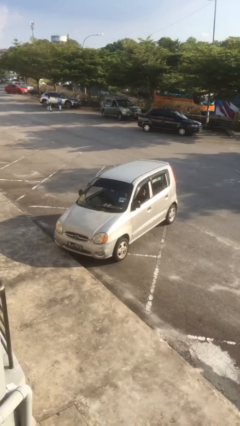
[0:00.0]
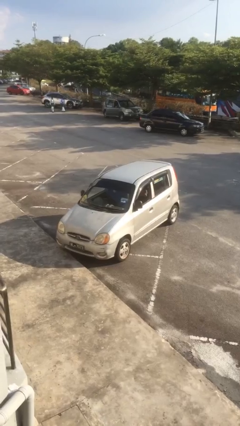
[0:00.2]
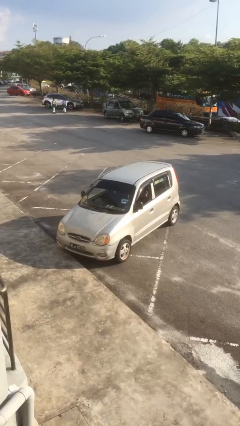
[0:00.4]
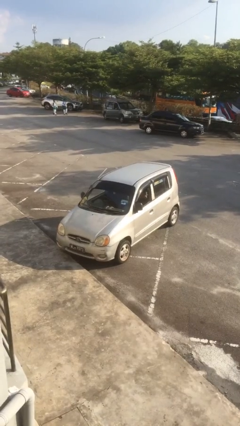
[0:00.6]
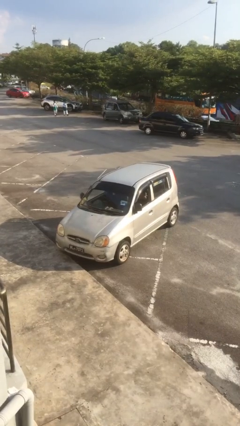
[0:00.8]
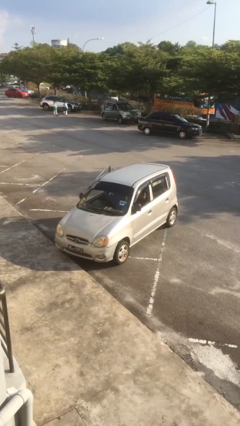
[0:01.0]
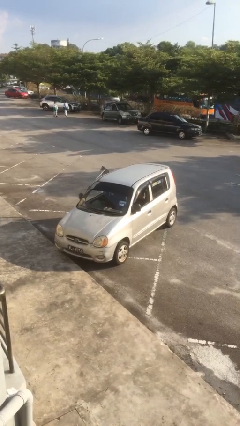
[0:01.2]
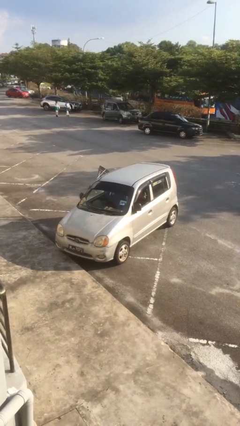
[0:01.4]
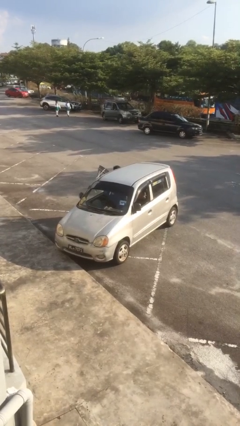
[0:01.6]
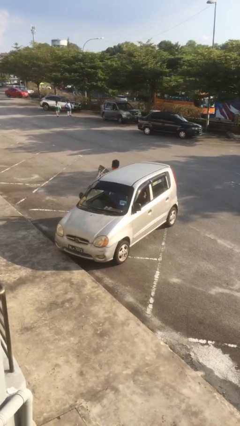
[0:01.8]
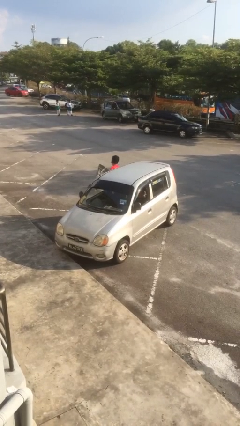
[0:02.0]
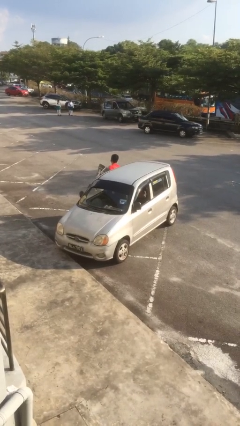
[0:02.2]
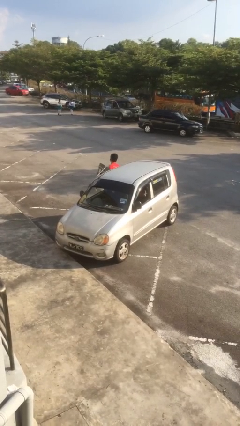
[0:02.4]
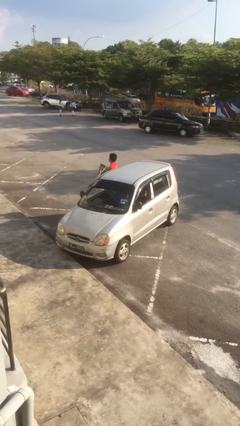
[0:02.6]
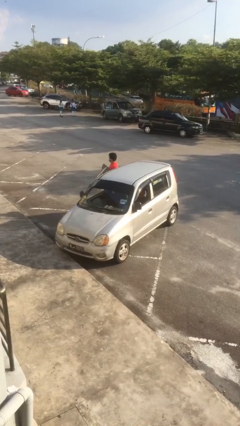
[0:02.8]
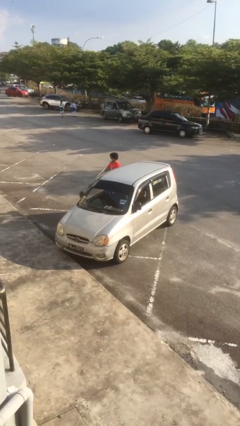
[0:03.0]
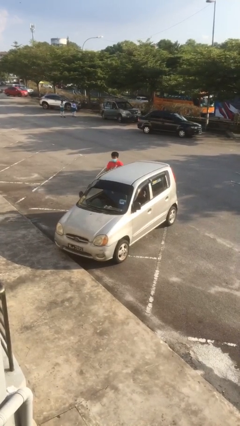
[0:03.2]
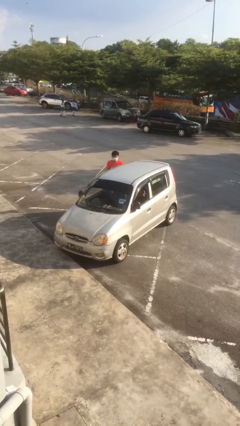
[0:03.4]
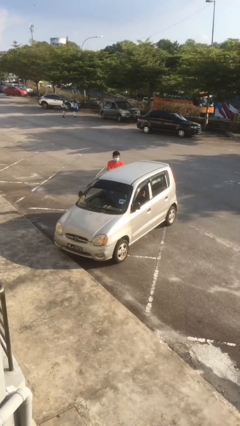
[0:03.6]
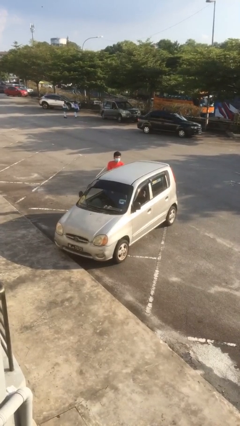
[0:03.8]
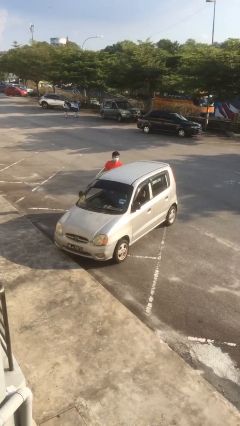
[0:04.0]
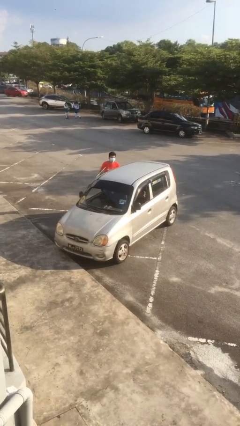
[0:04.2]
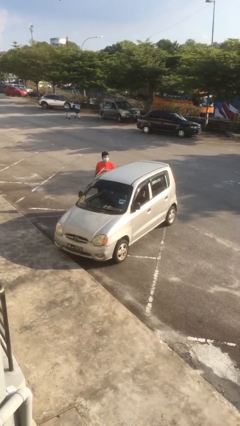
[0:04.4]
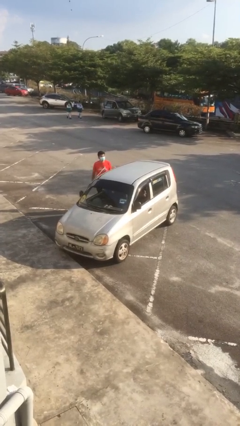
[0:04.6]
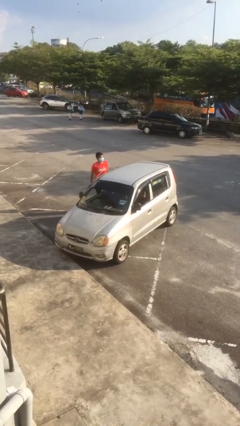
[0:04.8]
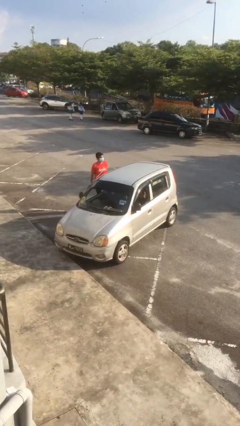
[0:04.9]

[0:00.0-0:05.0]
car drops off person

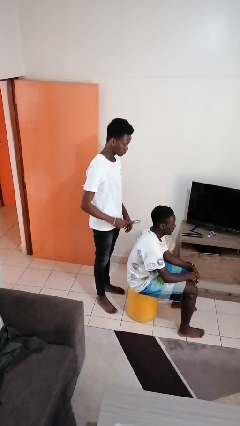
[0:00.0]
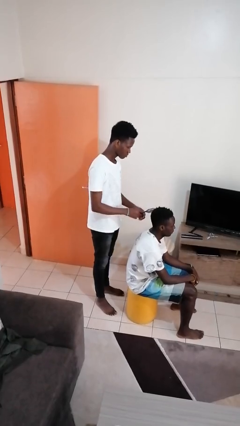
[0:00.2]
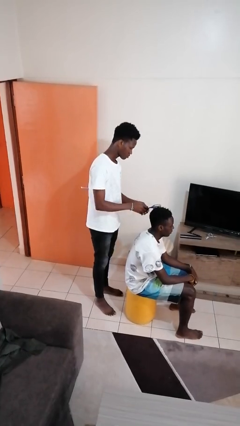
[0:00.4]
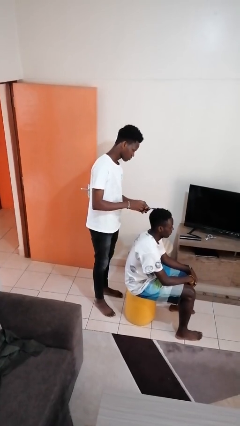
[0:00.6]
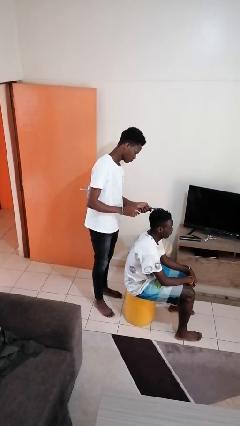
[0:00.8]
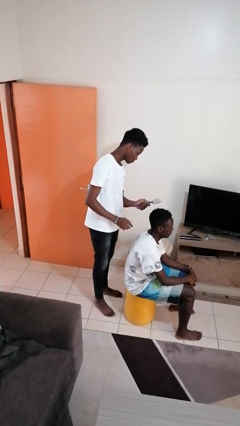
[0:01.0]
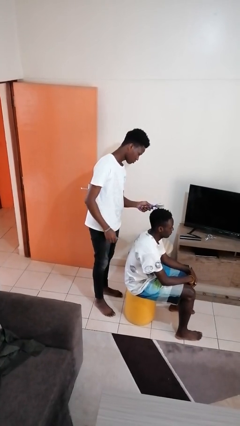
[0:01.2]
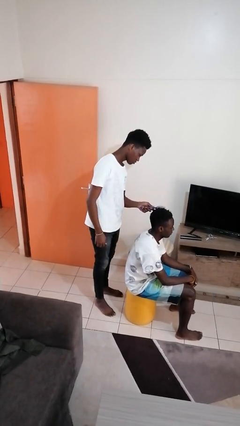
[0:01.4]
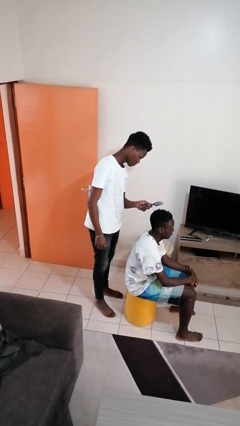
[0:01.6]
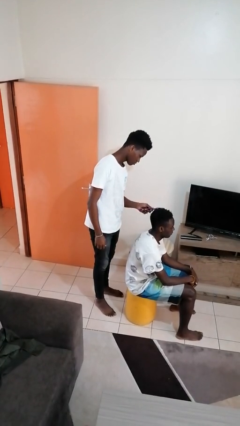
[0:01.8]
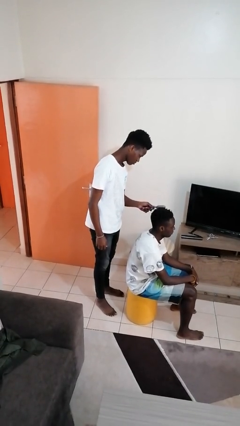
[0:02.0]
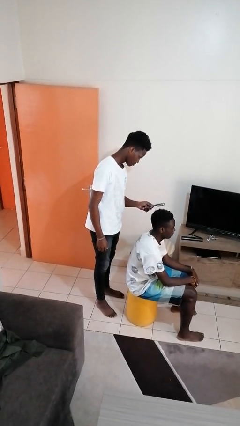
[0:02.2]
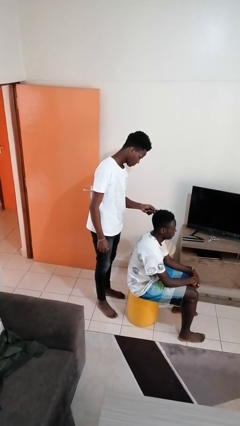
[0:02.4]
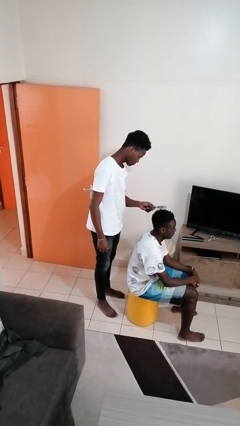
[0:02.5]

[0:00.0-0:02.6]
person brushes hair of person

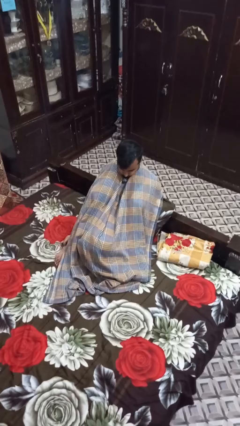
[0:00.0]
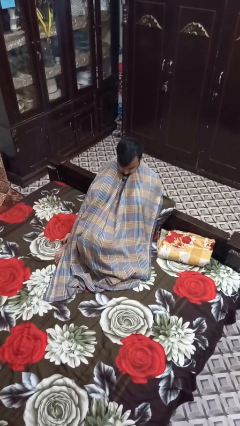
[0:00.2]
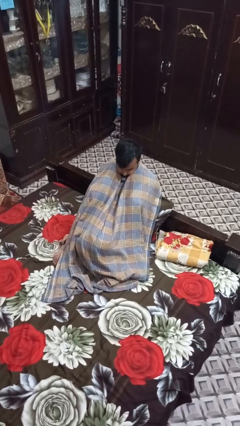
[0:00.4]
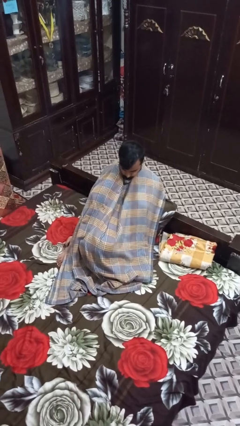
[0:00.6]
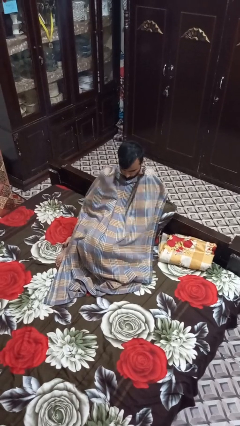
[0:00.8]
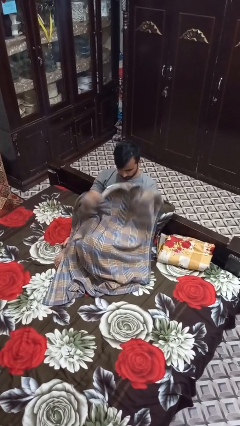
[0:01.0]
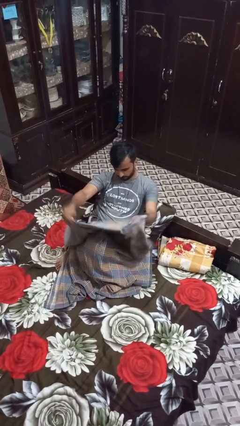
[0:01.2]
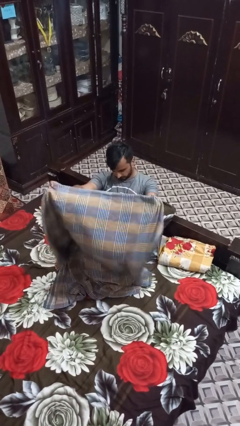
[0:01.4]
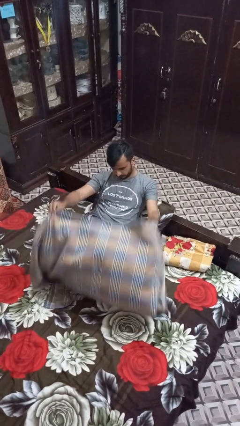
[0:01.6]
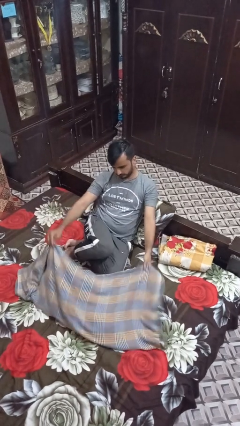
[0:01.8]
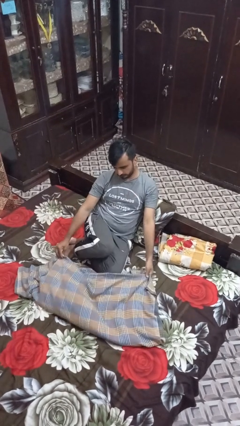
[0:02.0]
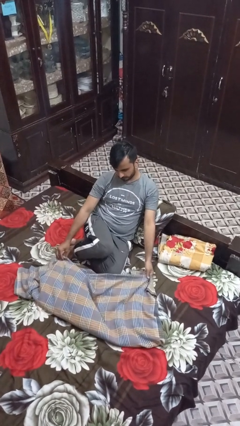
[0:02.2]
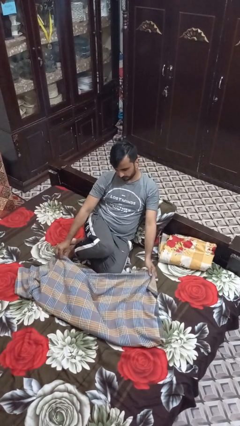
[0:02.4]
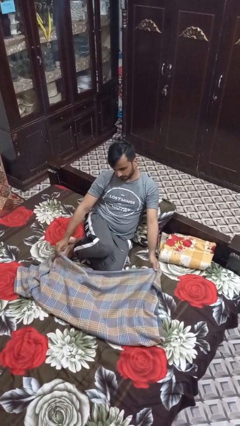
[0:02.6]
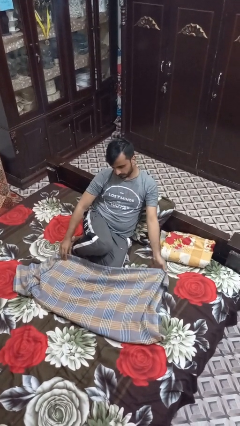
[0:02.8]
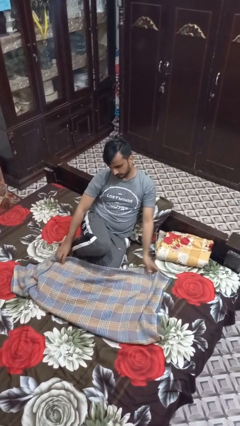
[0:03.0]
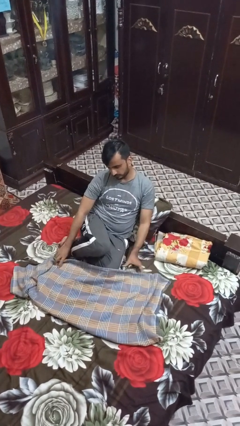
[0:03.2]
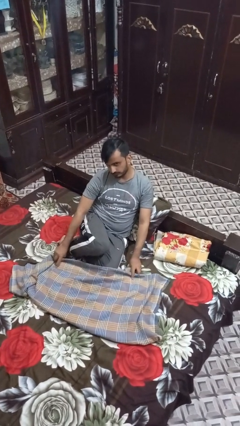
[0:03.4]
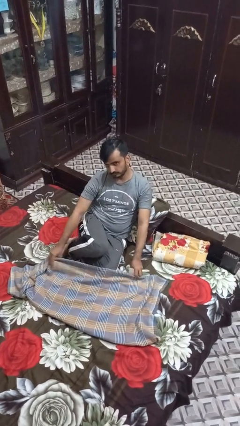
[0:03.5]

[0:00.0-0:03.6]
person uncovers with blanket

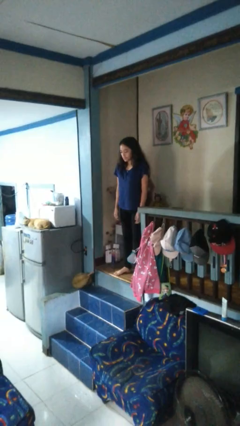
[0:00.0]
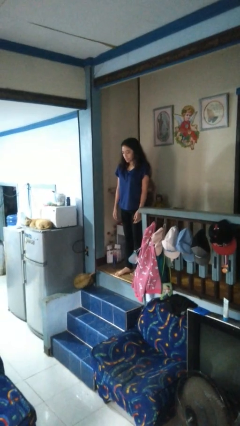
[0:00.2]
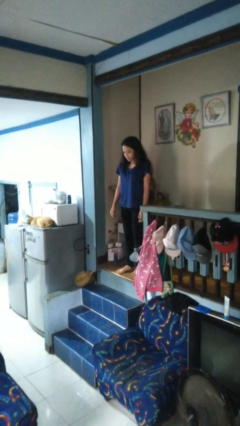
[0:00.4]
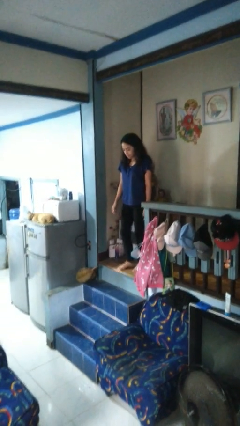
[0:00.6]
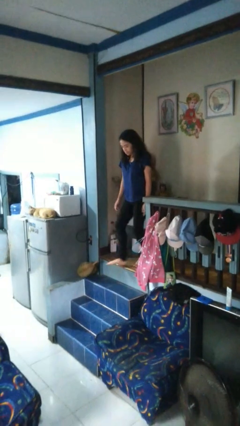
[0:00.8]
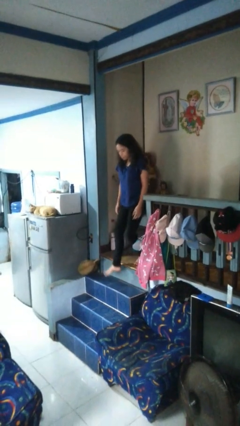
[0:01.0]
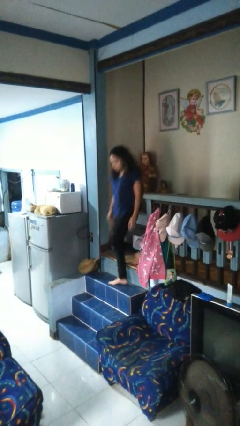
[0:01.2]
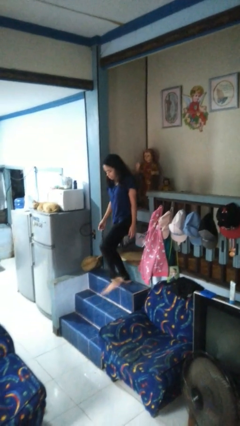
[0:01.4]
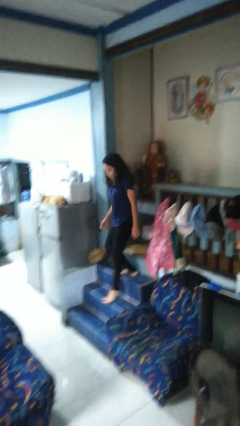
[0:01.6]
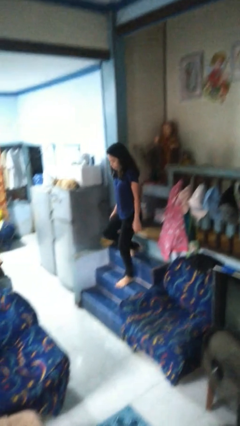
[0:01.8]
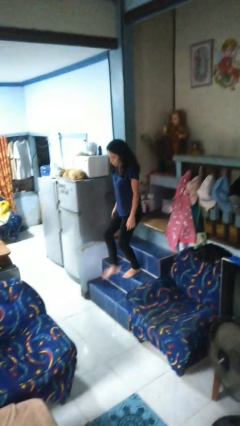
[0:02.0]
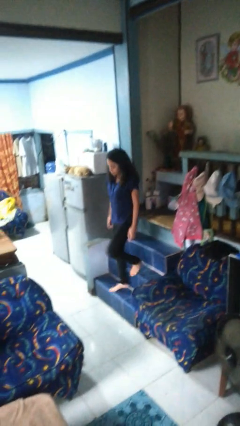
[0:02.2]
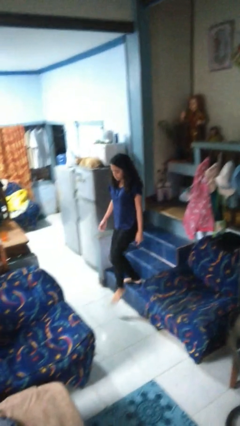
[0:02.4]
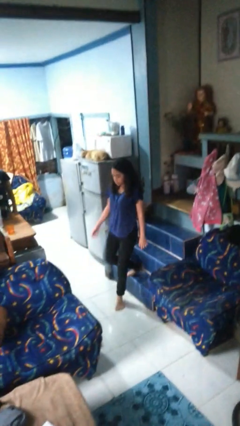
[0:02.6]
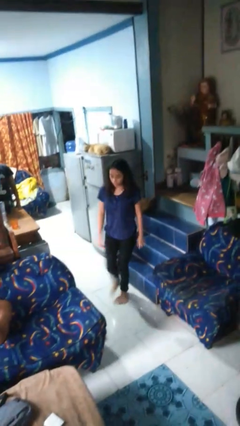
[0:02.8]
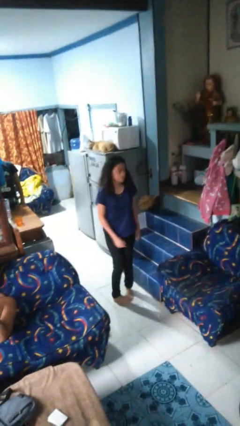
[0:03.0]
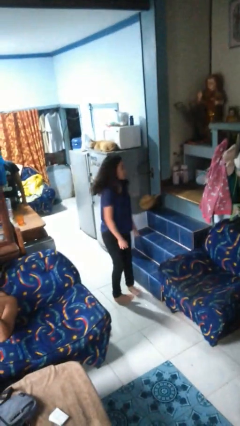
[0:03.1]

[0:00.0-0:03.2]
person climbs down stairs

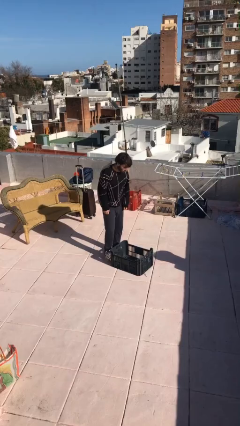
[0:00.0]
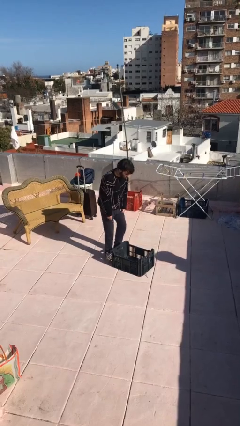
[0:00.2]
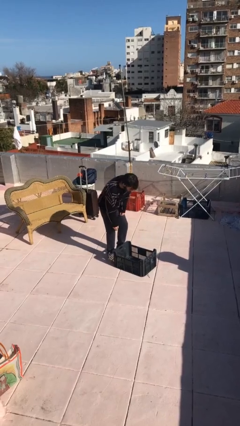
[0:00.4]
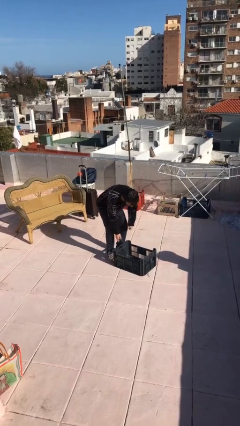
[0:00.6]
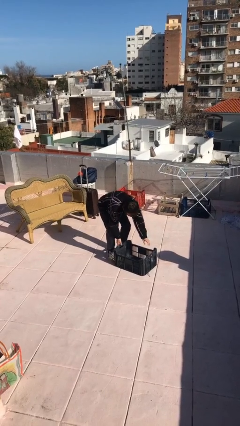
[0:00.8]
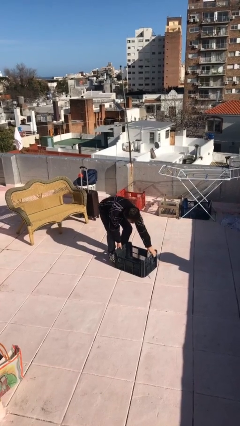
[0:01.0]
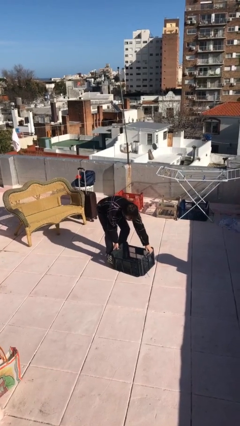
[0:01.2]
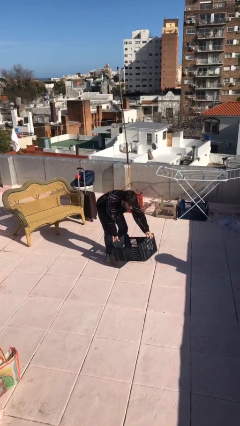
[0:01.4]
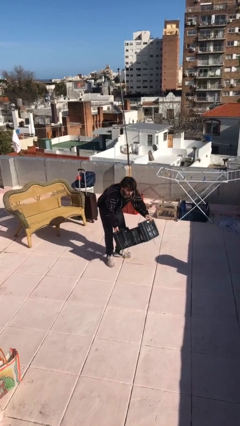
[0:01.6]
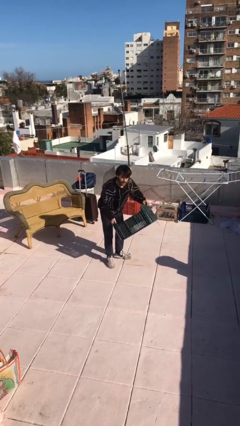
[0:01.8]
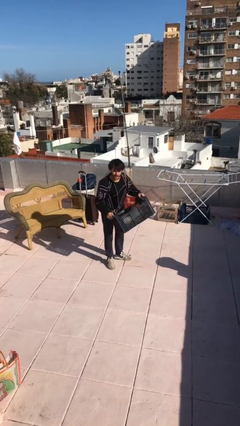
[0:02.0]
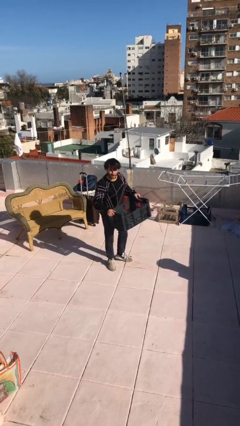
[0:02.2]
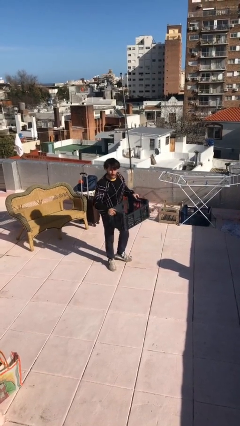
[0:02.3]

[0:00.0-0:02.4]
person picks up object from floor

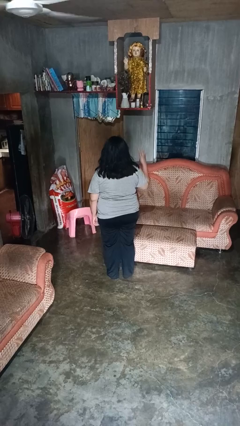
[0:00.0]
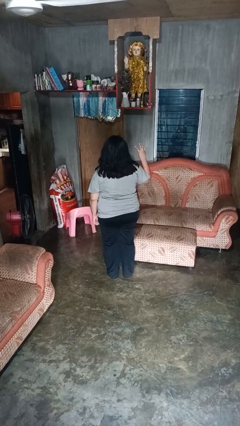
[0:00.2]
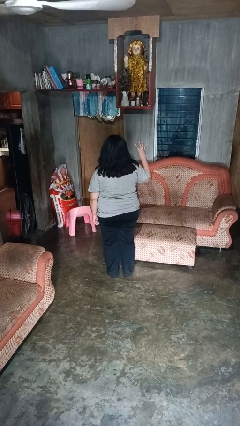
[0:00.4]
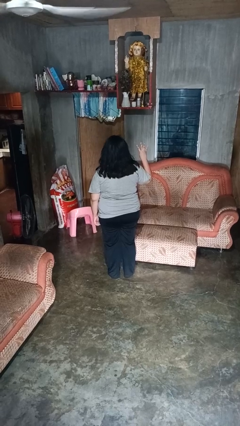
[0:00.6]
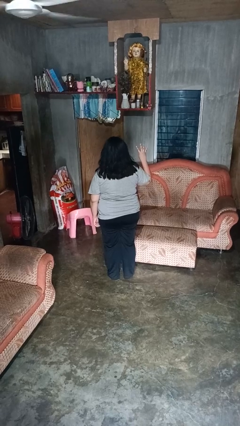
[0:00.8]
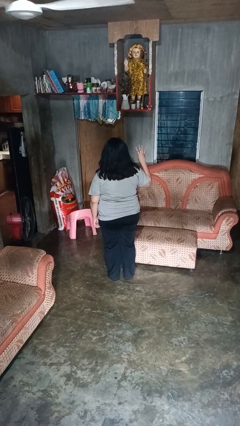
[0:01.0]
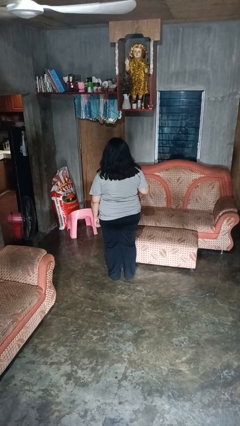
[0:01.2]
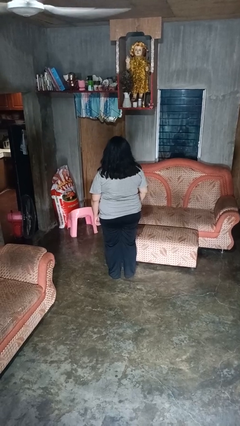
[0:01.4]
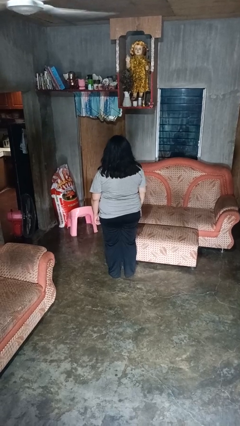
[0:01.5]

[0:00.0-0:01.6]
person gestures number four
